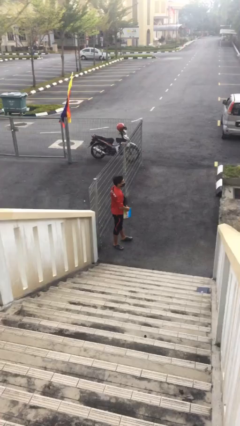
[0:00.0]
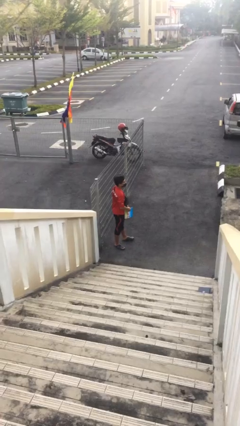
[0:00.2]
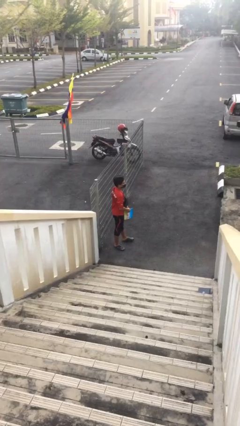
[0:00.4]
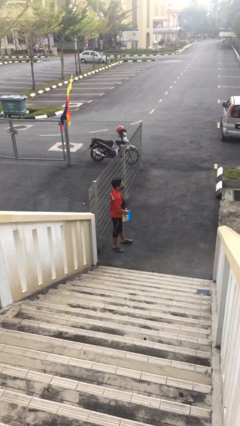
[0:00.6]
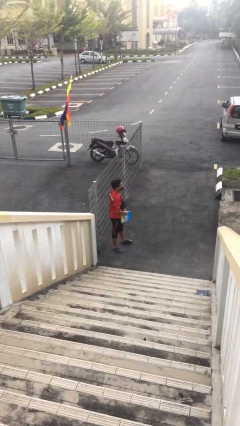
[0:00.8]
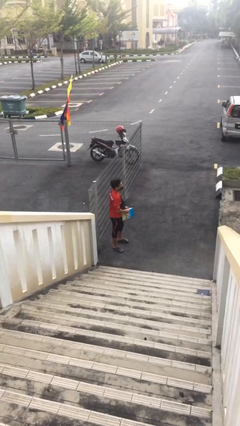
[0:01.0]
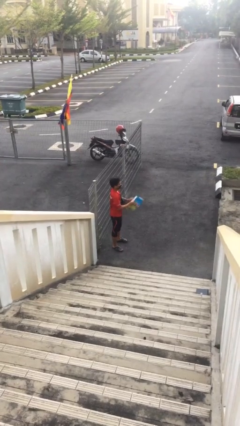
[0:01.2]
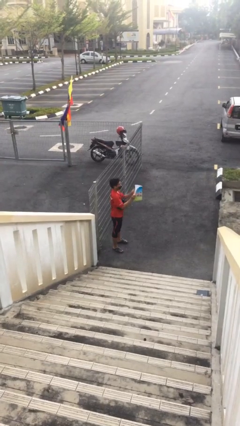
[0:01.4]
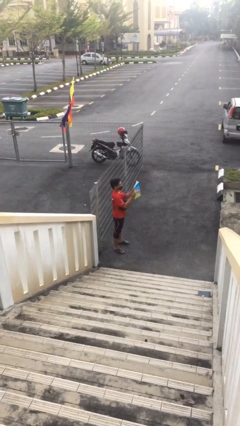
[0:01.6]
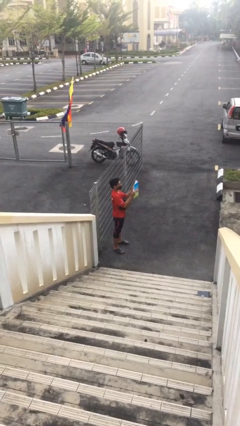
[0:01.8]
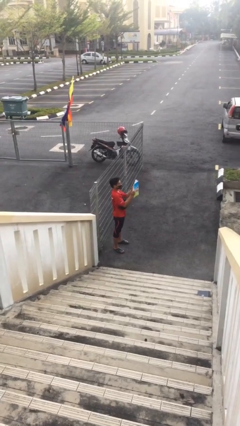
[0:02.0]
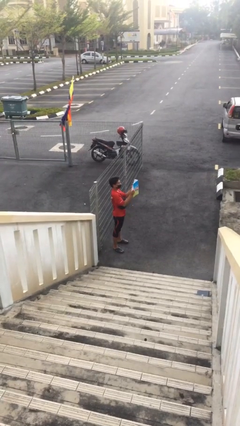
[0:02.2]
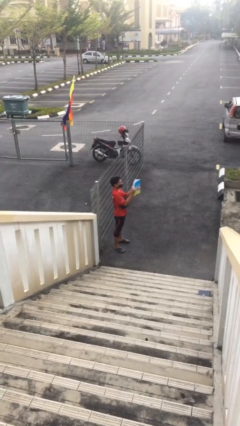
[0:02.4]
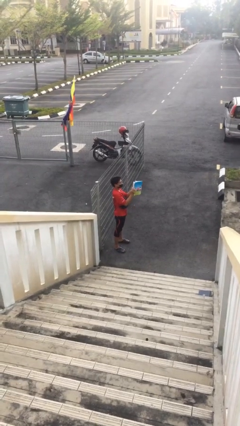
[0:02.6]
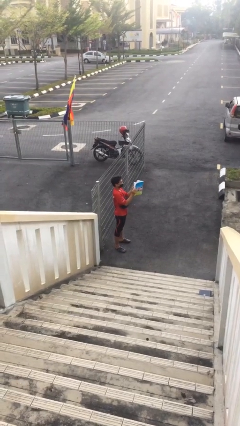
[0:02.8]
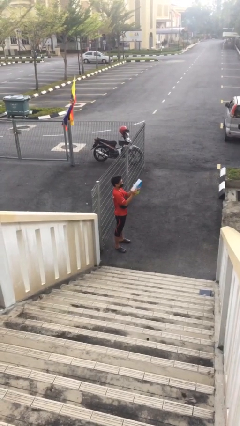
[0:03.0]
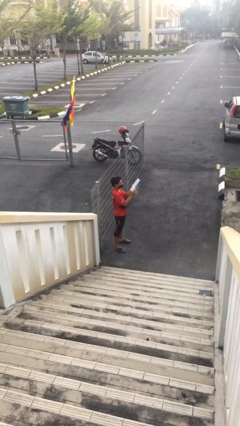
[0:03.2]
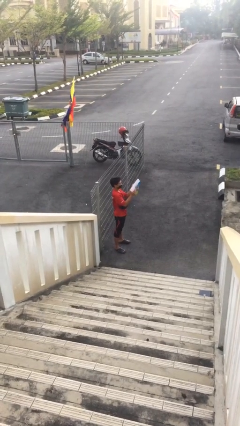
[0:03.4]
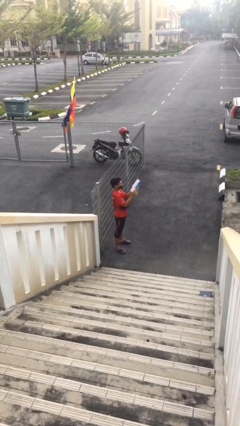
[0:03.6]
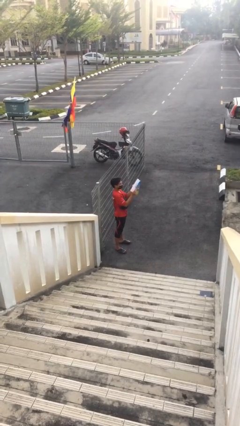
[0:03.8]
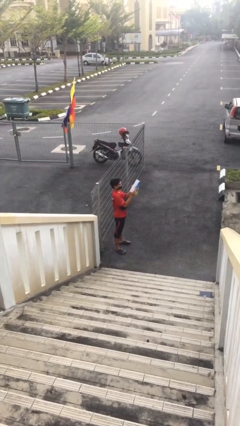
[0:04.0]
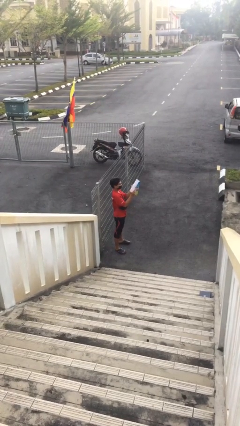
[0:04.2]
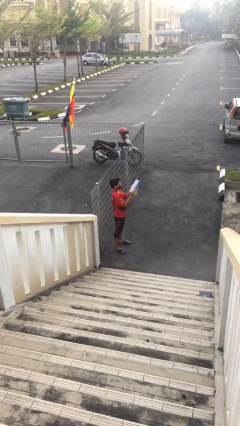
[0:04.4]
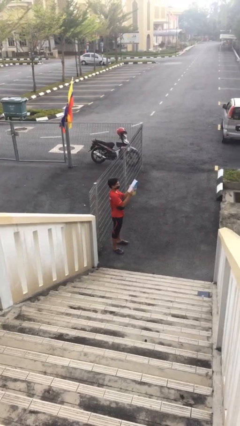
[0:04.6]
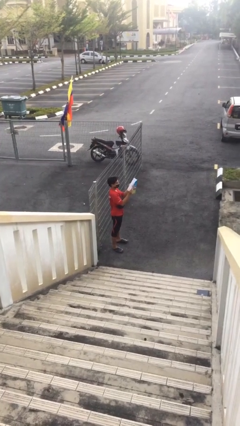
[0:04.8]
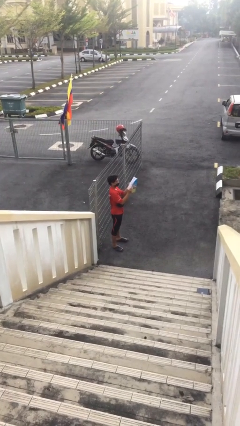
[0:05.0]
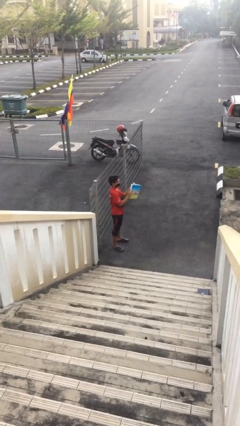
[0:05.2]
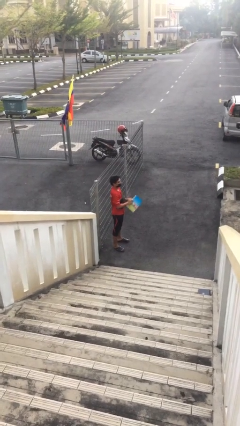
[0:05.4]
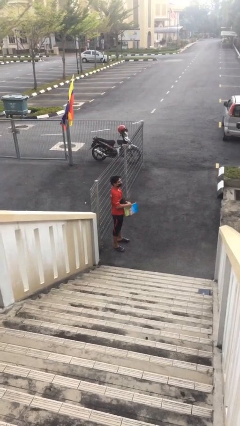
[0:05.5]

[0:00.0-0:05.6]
person reads document

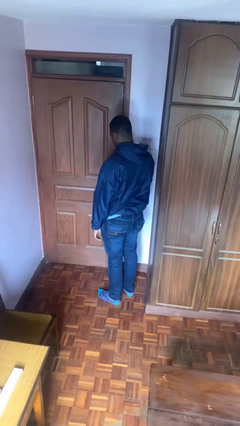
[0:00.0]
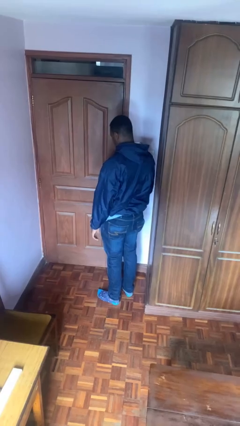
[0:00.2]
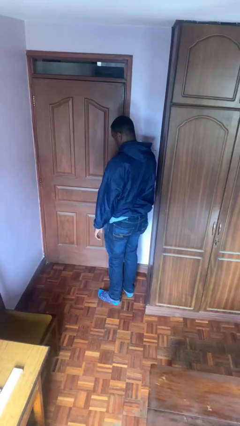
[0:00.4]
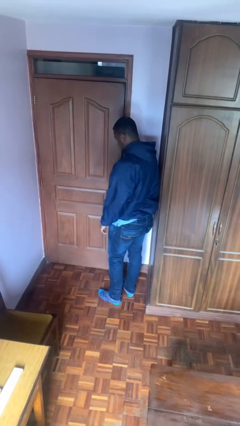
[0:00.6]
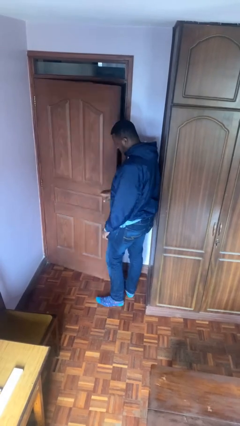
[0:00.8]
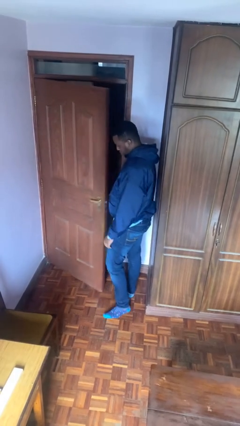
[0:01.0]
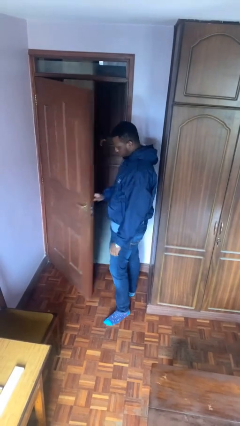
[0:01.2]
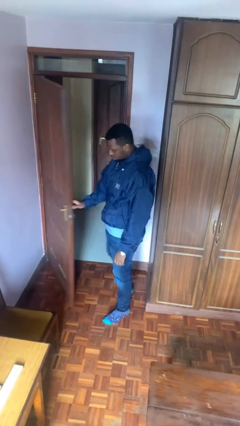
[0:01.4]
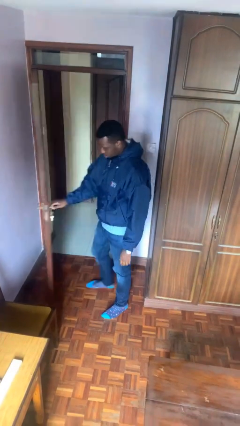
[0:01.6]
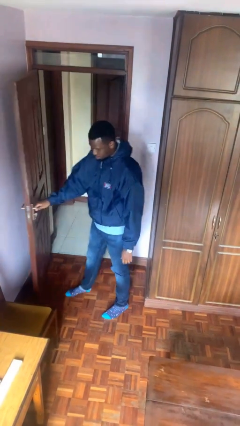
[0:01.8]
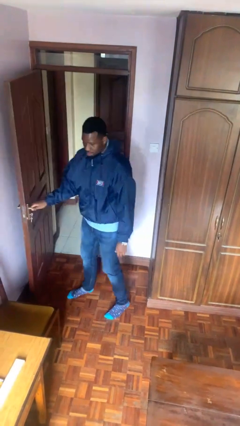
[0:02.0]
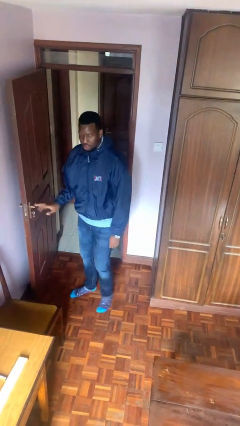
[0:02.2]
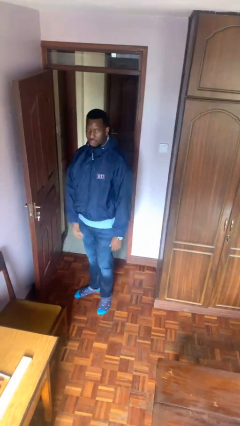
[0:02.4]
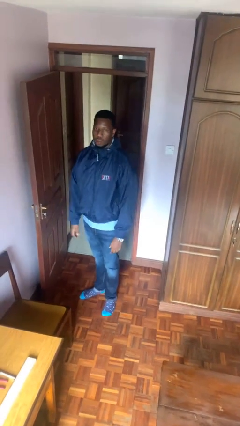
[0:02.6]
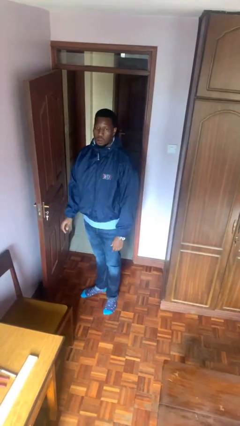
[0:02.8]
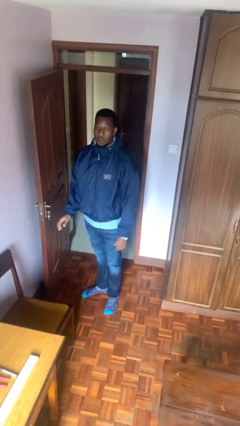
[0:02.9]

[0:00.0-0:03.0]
person opens facility door

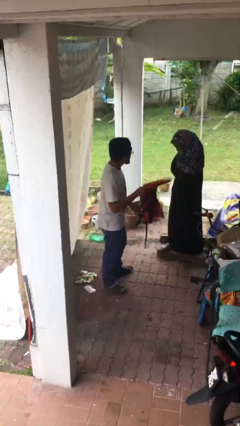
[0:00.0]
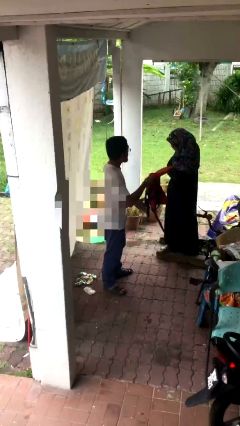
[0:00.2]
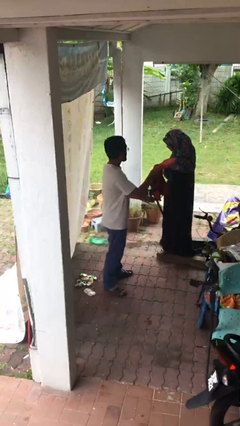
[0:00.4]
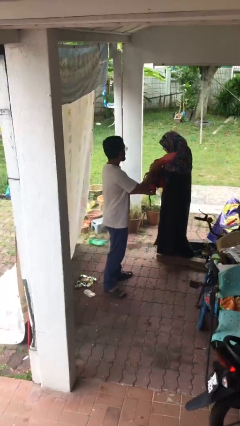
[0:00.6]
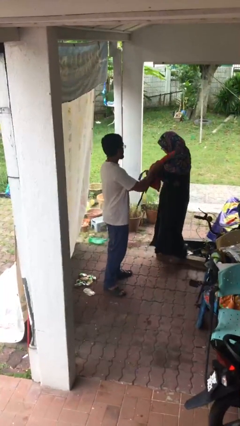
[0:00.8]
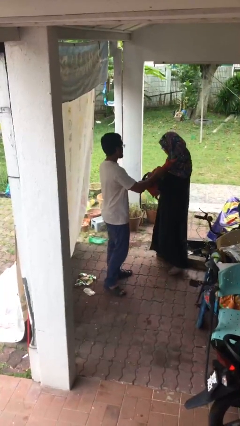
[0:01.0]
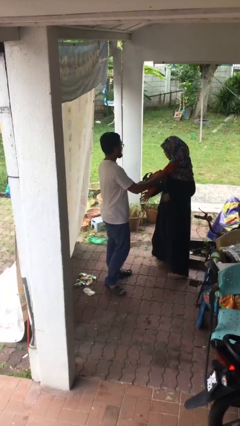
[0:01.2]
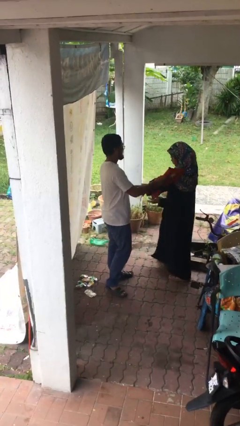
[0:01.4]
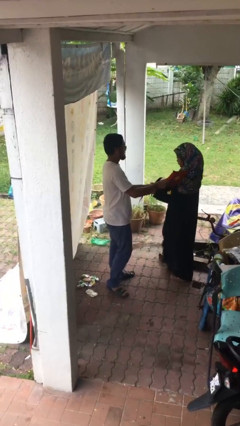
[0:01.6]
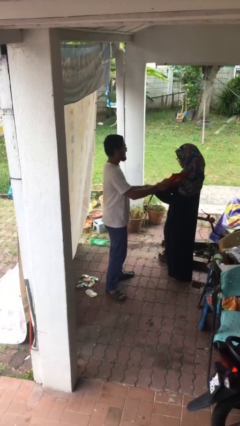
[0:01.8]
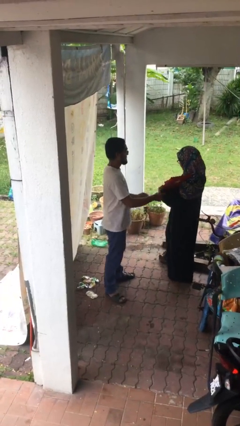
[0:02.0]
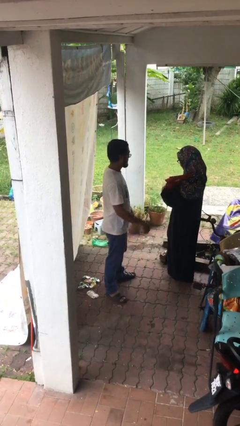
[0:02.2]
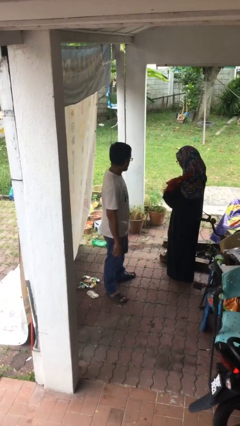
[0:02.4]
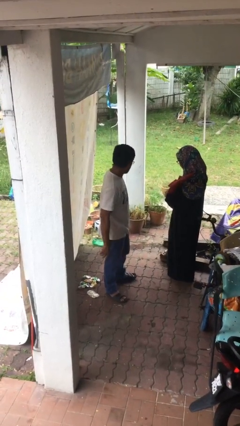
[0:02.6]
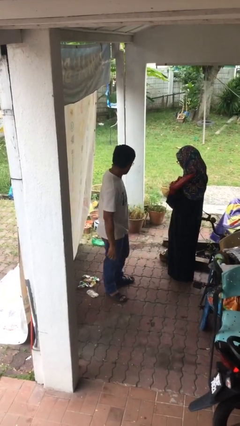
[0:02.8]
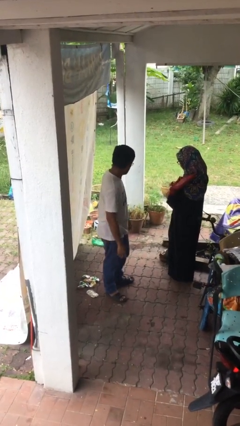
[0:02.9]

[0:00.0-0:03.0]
person transfers object to person

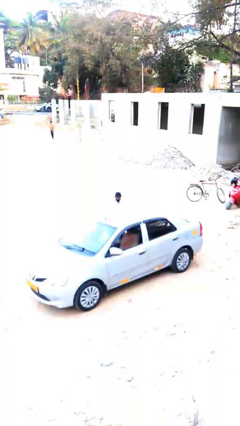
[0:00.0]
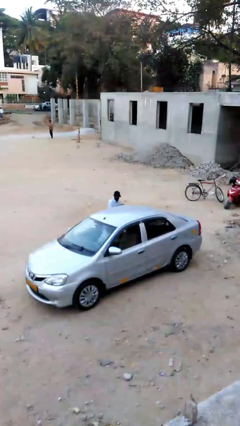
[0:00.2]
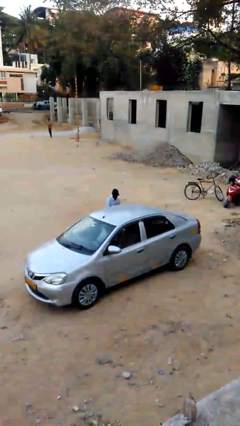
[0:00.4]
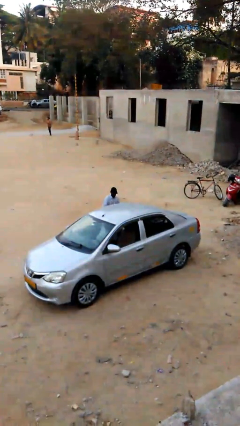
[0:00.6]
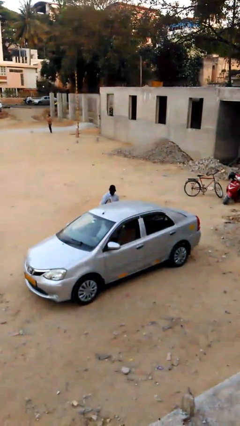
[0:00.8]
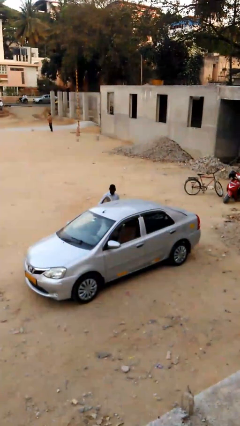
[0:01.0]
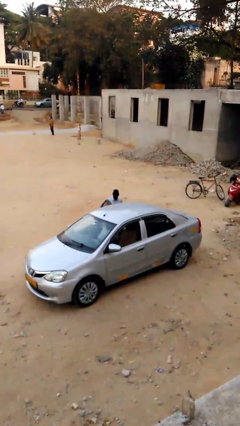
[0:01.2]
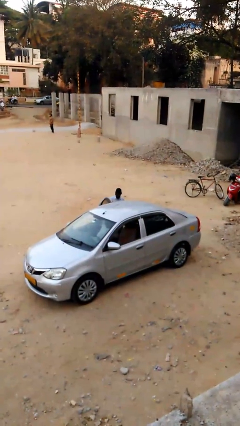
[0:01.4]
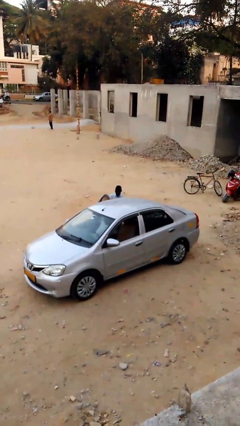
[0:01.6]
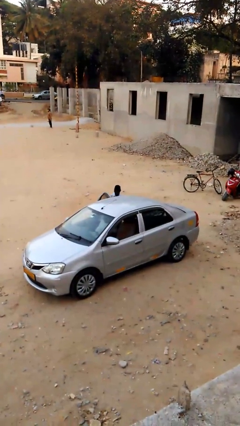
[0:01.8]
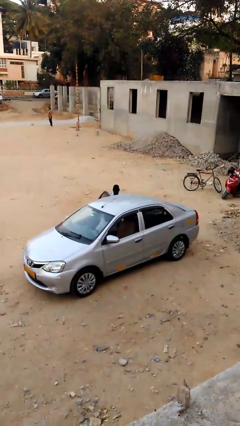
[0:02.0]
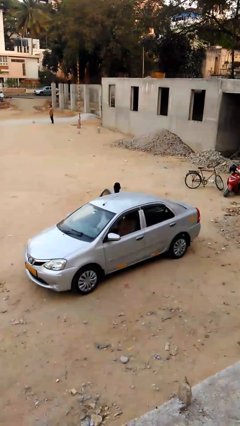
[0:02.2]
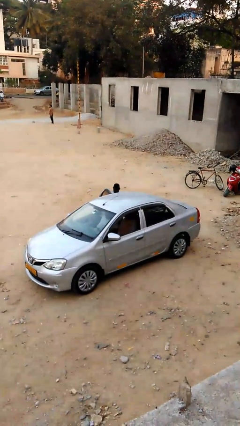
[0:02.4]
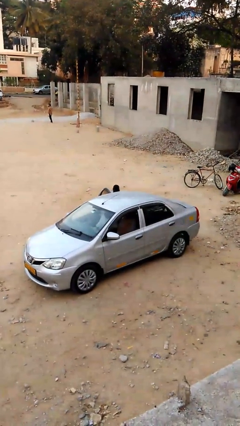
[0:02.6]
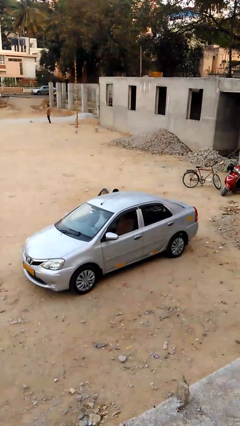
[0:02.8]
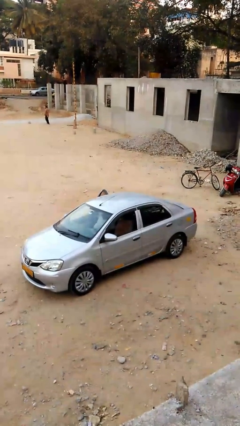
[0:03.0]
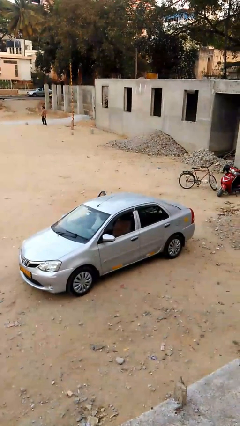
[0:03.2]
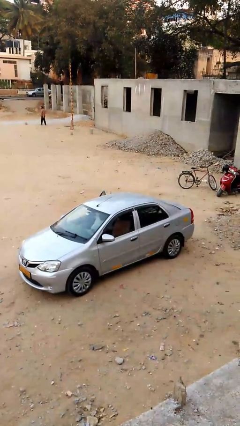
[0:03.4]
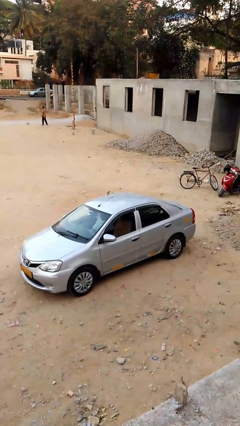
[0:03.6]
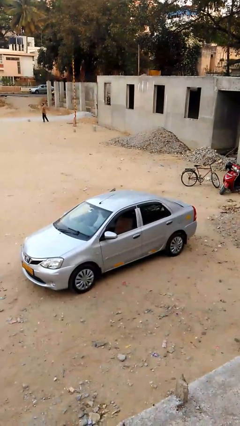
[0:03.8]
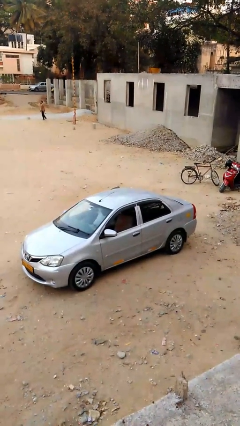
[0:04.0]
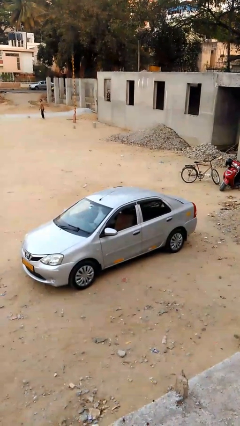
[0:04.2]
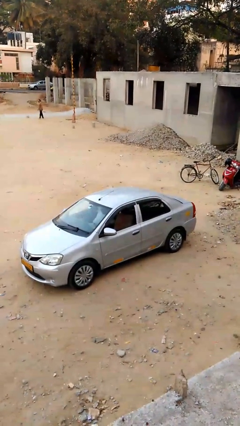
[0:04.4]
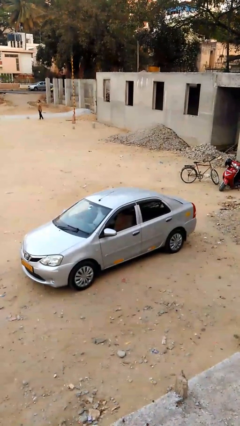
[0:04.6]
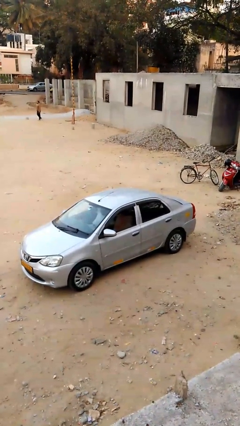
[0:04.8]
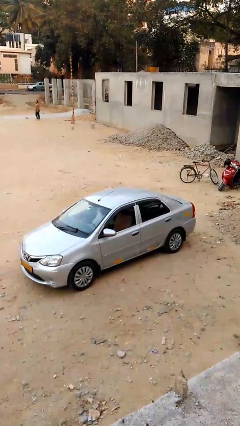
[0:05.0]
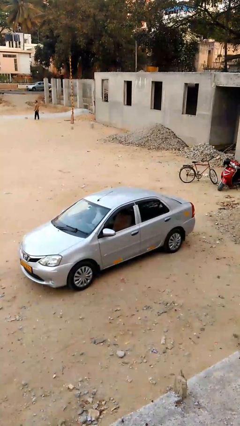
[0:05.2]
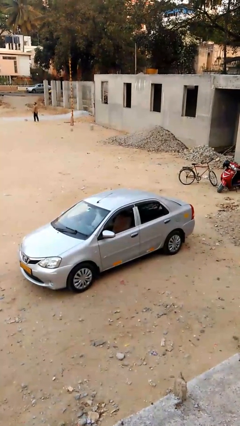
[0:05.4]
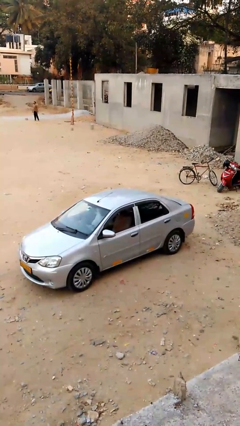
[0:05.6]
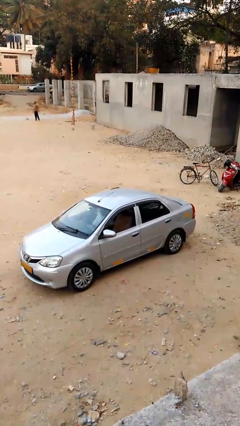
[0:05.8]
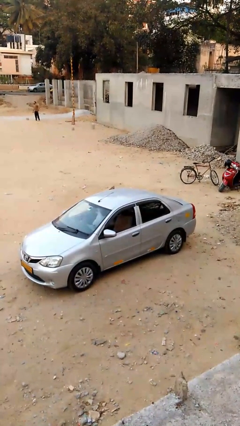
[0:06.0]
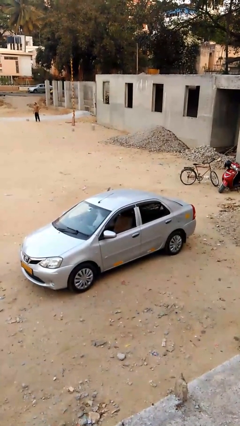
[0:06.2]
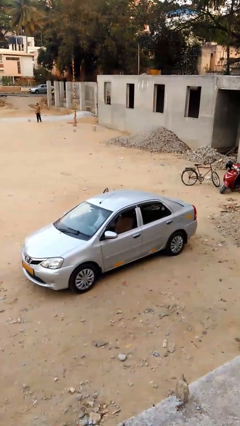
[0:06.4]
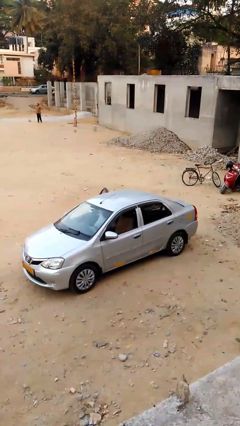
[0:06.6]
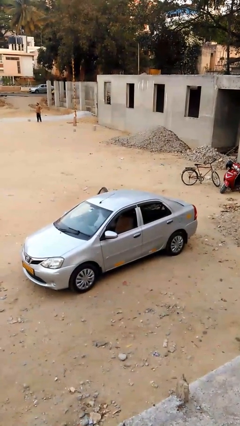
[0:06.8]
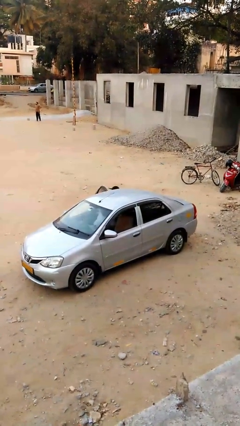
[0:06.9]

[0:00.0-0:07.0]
person enters car
